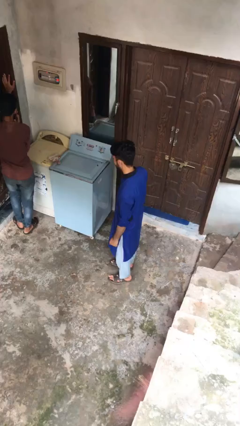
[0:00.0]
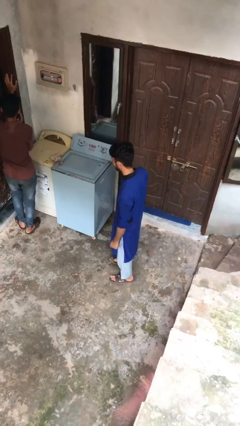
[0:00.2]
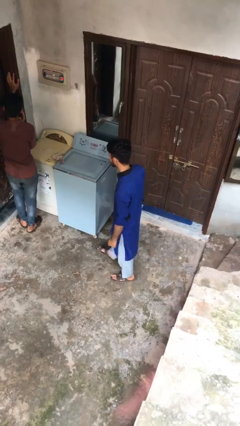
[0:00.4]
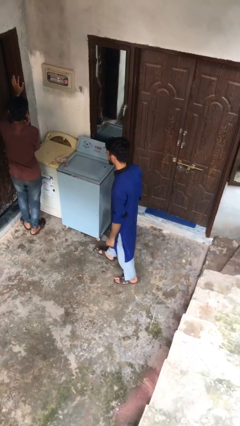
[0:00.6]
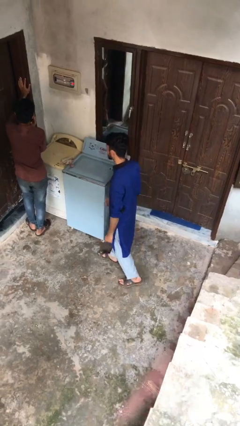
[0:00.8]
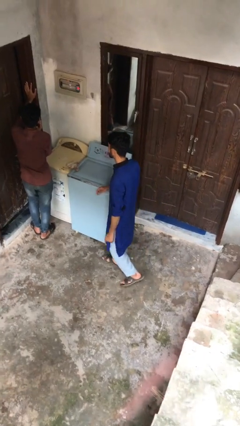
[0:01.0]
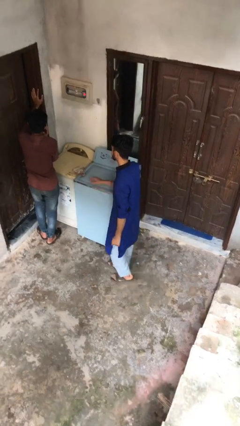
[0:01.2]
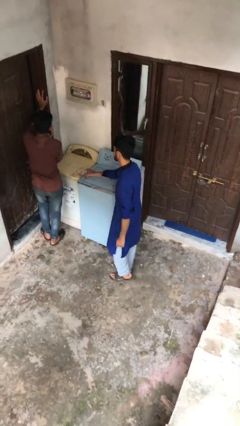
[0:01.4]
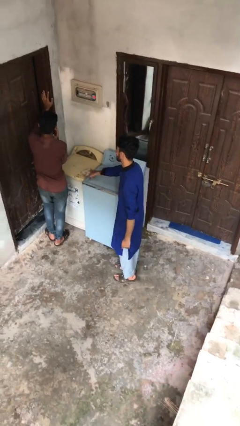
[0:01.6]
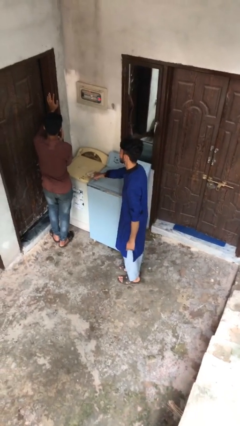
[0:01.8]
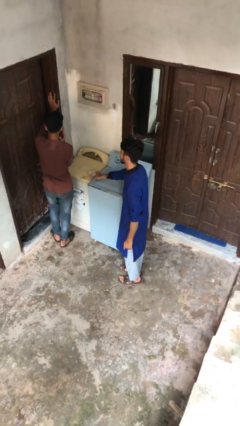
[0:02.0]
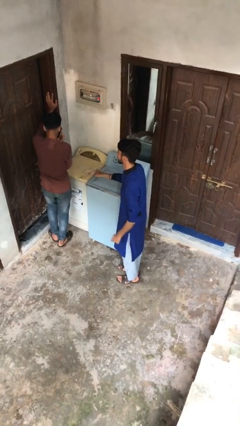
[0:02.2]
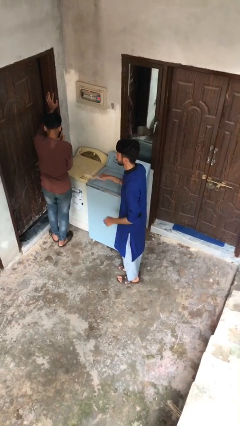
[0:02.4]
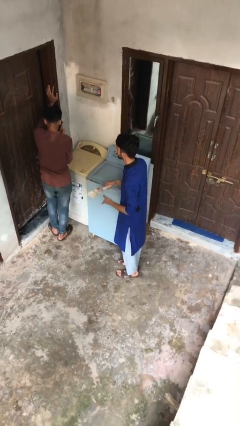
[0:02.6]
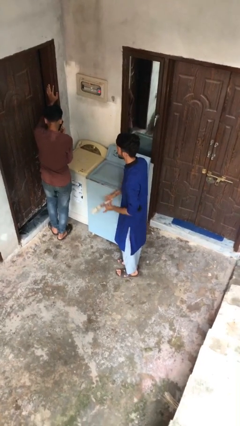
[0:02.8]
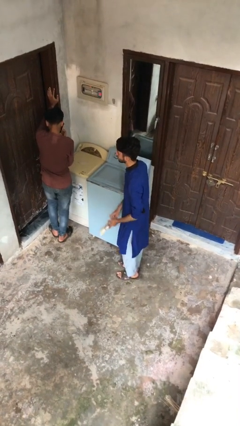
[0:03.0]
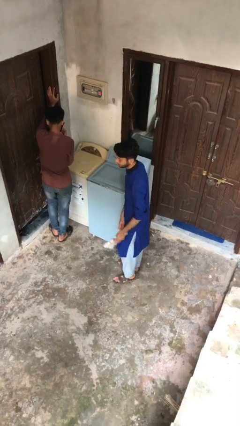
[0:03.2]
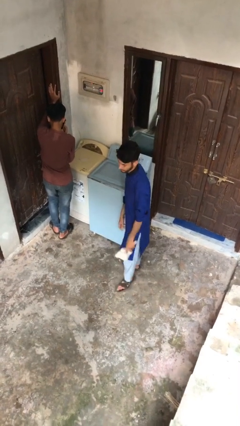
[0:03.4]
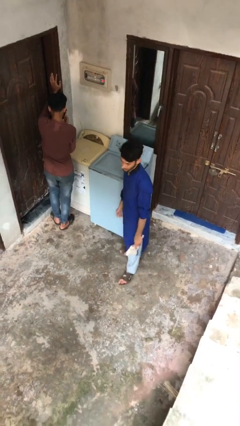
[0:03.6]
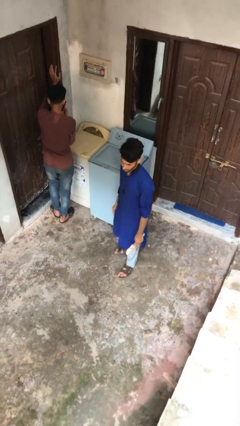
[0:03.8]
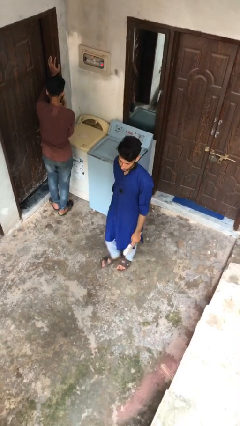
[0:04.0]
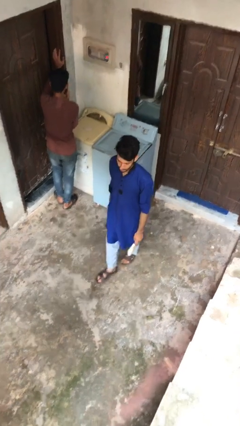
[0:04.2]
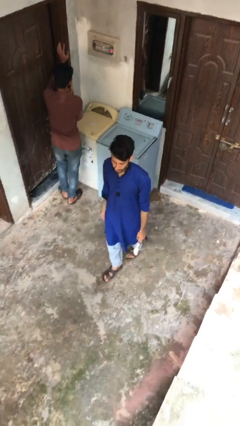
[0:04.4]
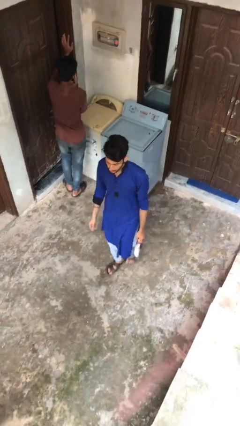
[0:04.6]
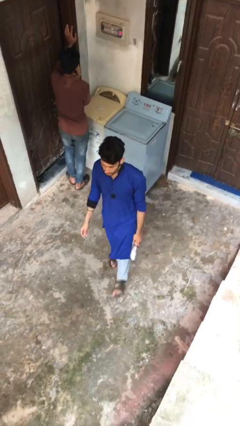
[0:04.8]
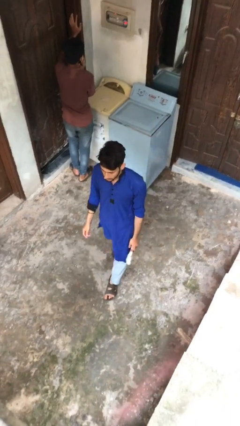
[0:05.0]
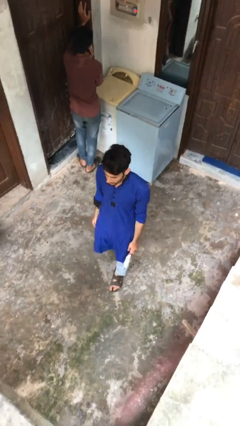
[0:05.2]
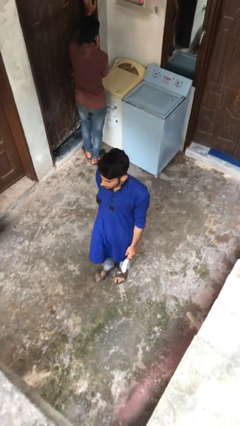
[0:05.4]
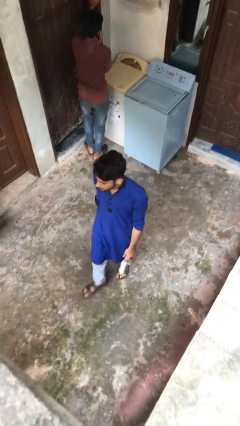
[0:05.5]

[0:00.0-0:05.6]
person steals object from person

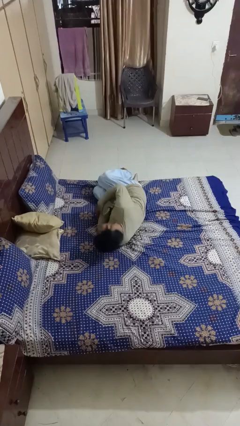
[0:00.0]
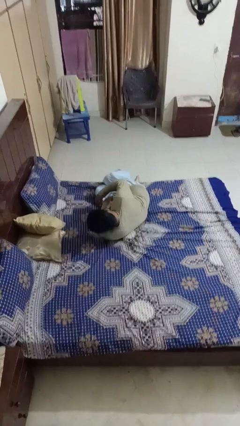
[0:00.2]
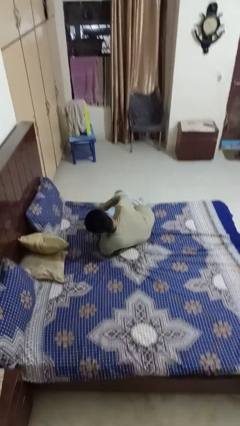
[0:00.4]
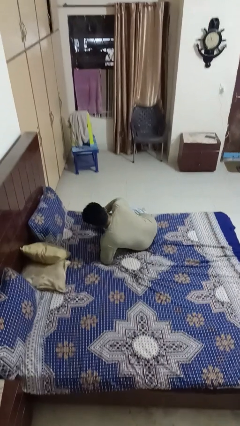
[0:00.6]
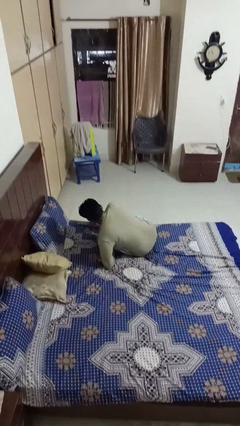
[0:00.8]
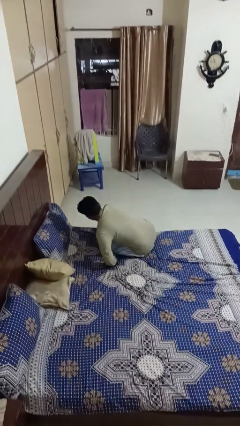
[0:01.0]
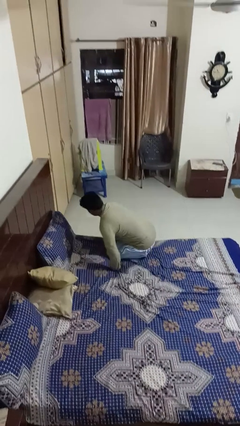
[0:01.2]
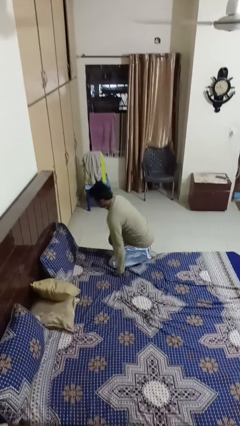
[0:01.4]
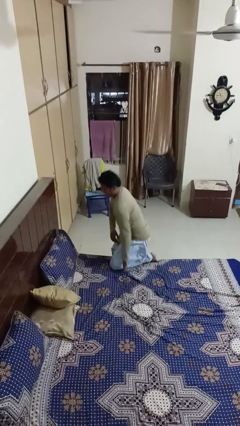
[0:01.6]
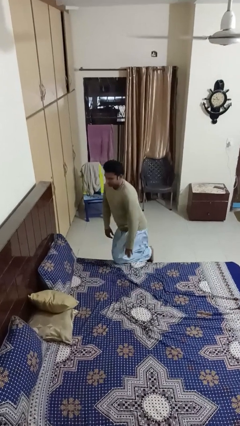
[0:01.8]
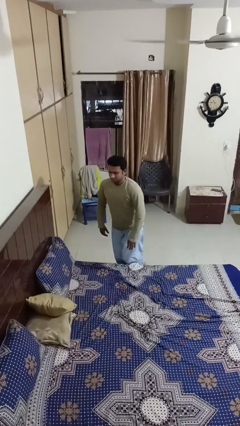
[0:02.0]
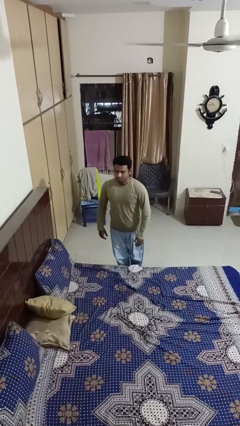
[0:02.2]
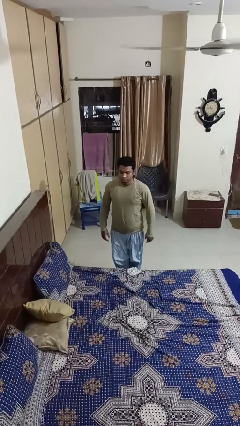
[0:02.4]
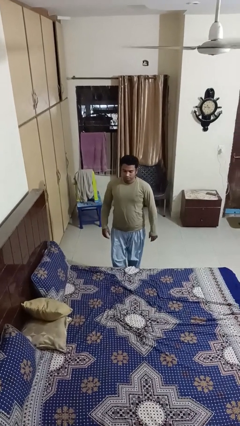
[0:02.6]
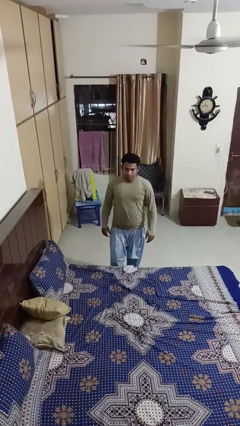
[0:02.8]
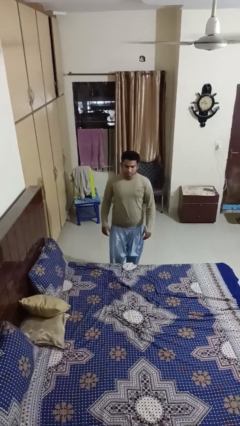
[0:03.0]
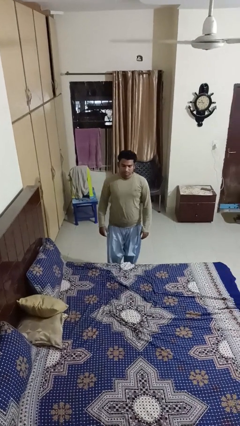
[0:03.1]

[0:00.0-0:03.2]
person stands up

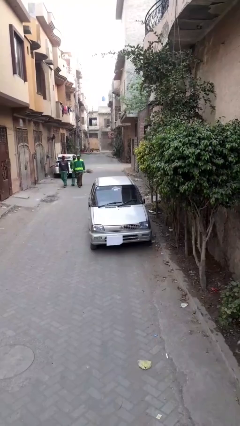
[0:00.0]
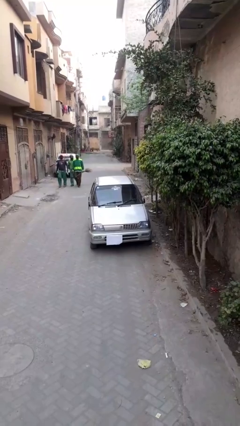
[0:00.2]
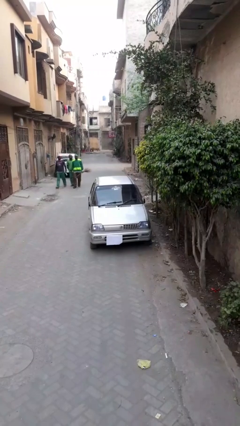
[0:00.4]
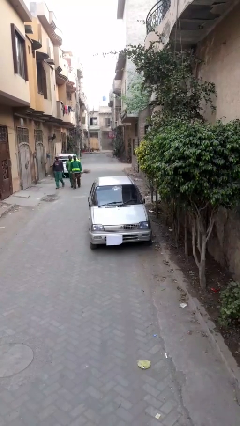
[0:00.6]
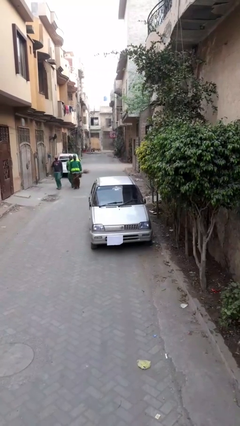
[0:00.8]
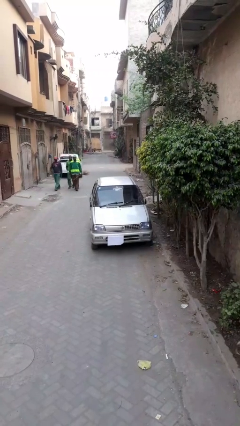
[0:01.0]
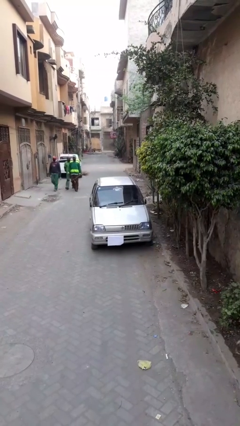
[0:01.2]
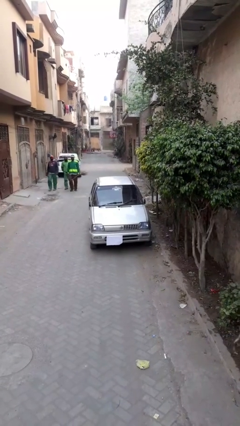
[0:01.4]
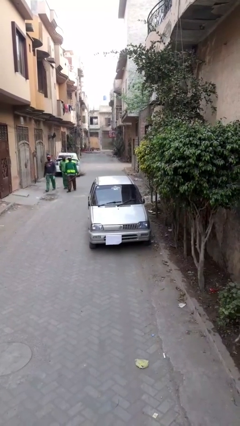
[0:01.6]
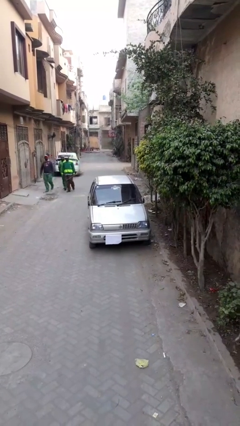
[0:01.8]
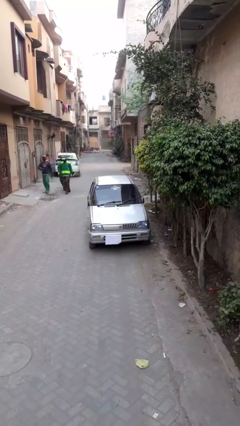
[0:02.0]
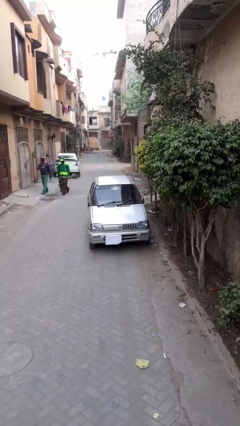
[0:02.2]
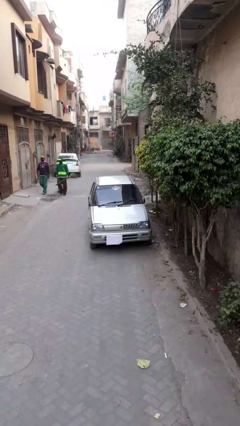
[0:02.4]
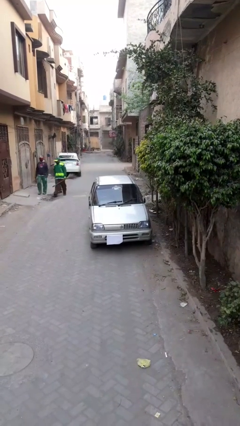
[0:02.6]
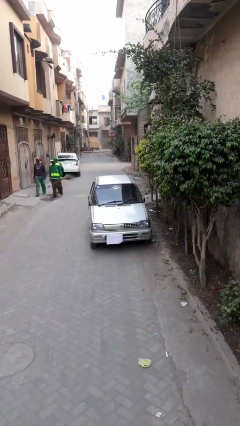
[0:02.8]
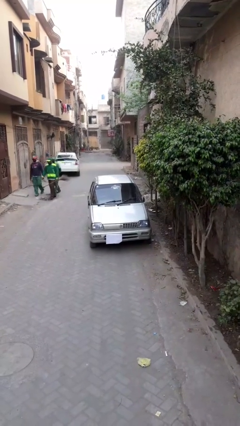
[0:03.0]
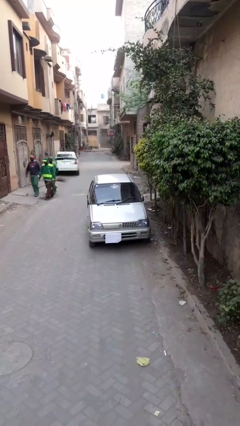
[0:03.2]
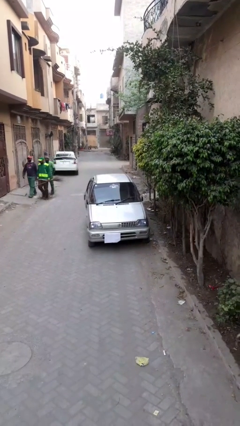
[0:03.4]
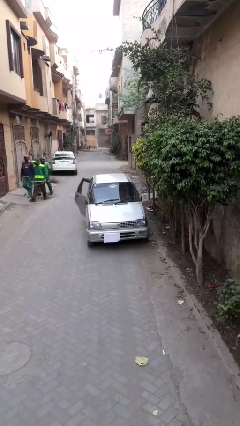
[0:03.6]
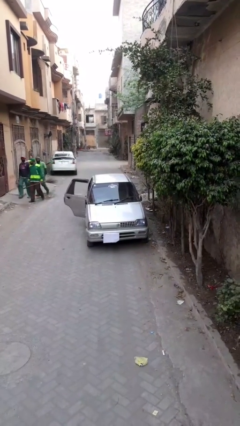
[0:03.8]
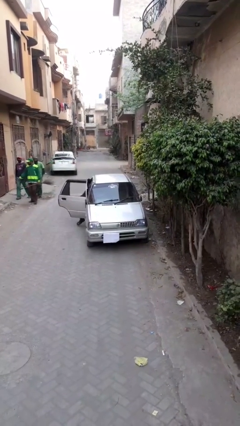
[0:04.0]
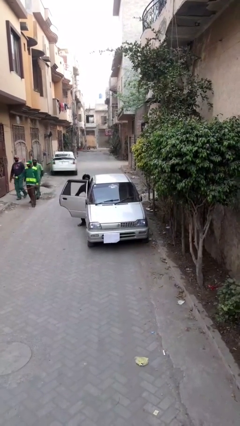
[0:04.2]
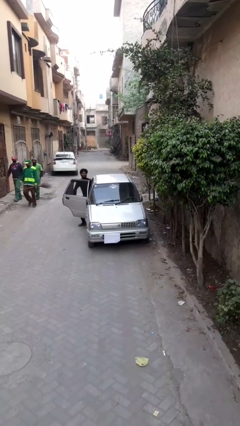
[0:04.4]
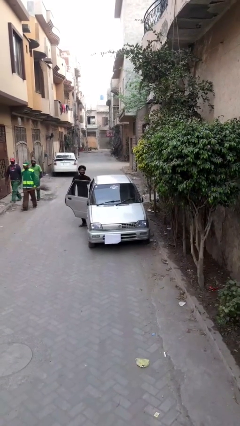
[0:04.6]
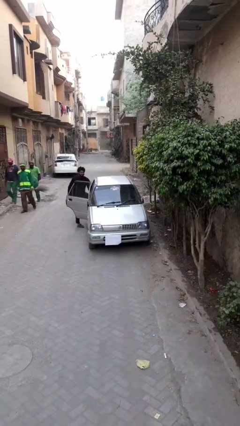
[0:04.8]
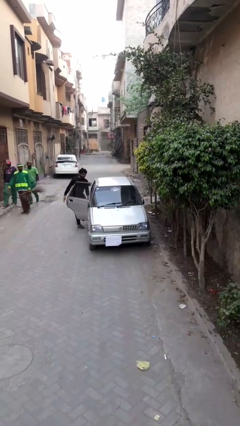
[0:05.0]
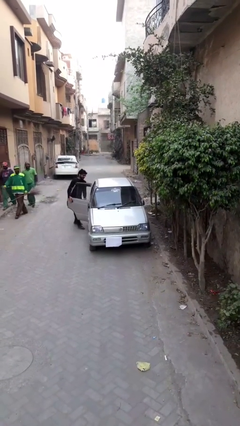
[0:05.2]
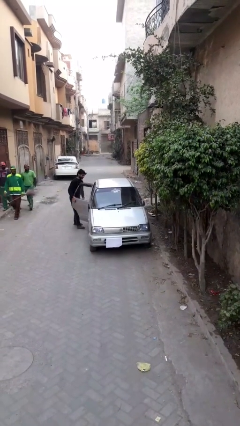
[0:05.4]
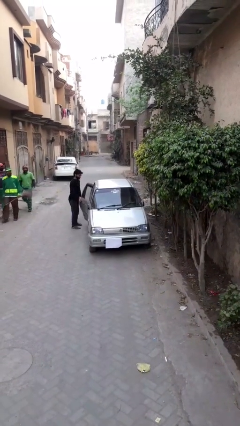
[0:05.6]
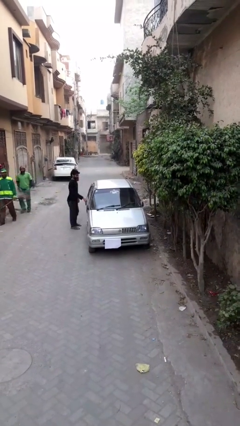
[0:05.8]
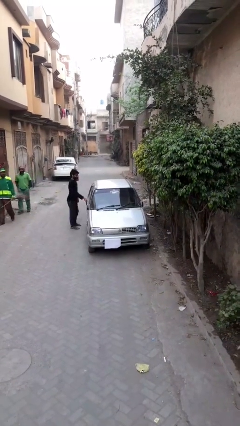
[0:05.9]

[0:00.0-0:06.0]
car drops off person

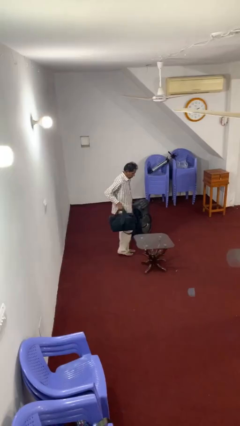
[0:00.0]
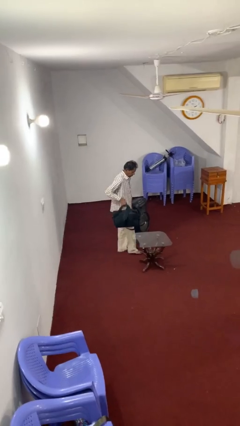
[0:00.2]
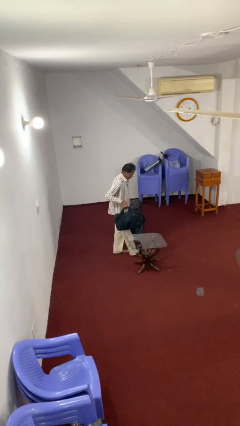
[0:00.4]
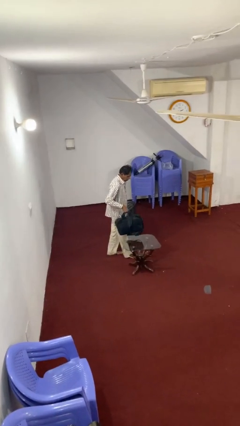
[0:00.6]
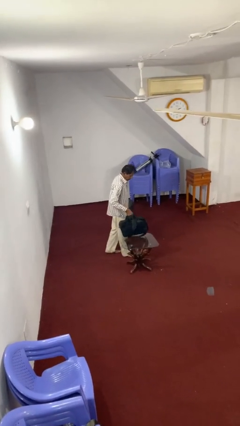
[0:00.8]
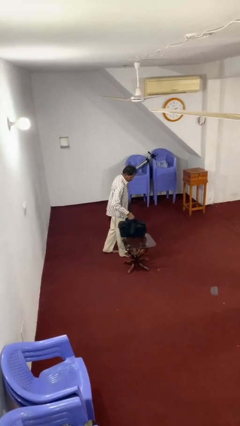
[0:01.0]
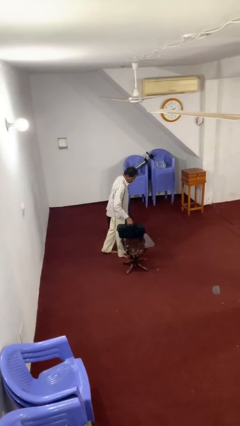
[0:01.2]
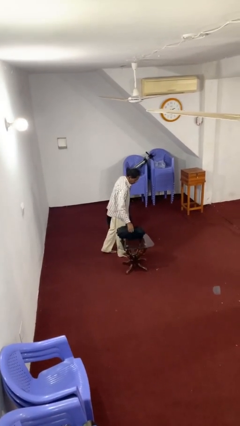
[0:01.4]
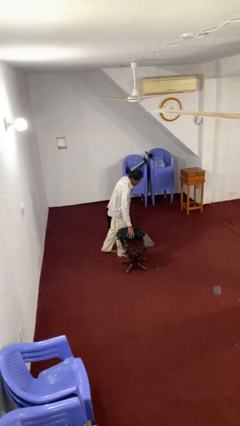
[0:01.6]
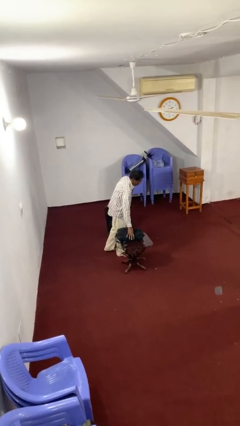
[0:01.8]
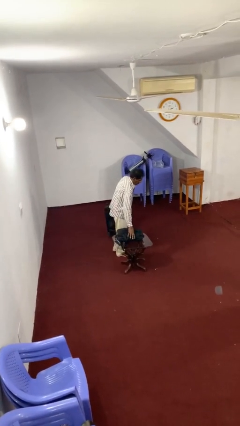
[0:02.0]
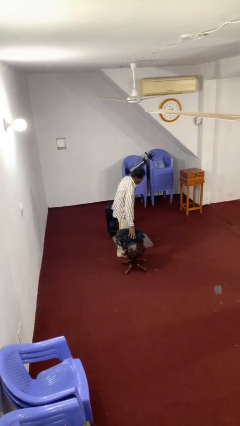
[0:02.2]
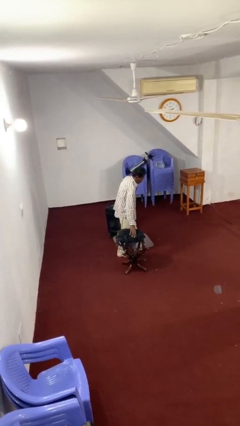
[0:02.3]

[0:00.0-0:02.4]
person puts down object on table

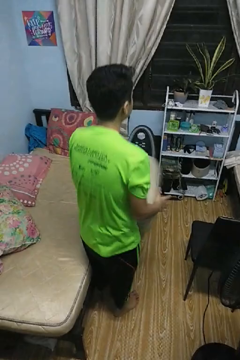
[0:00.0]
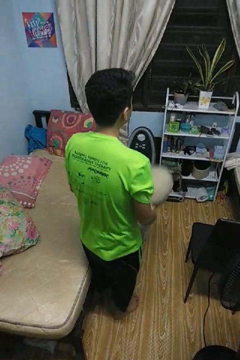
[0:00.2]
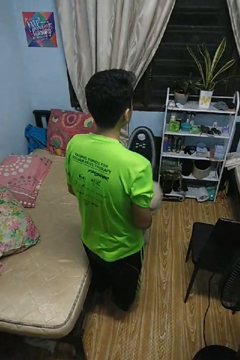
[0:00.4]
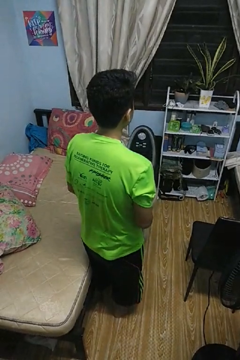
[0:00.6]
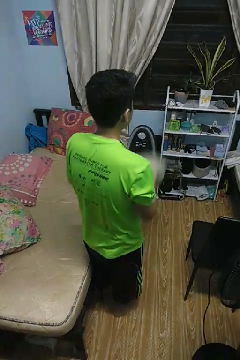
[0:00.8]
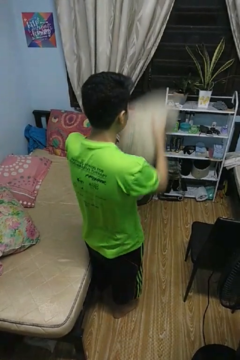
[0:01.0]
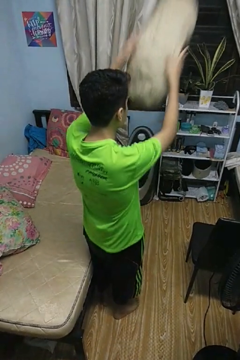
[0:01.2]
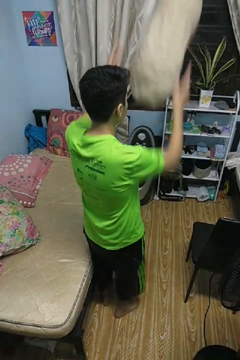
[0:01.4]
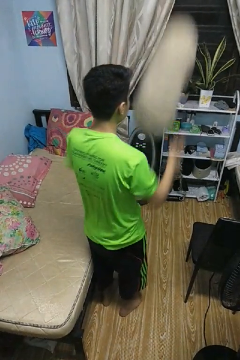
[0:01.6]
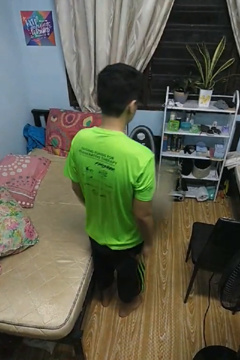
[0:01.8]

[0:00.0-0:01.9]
person throws object into air
